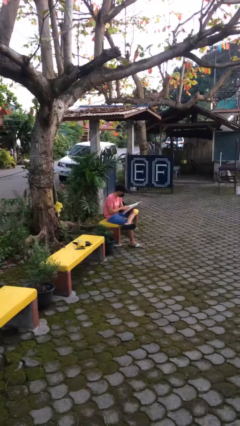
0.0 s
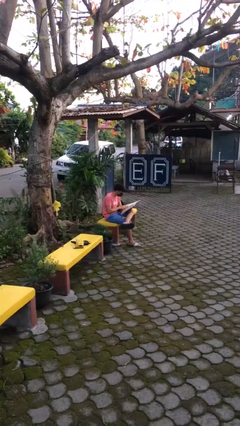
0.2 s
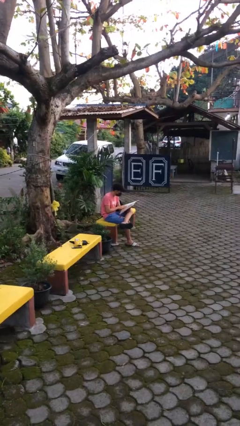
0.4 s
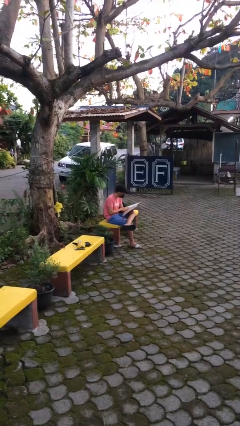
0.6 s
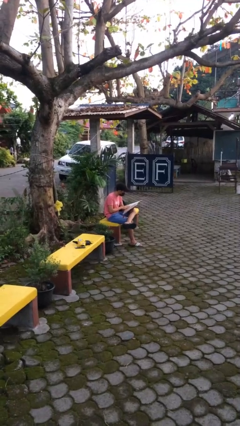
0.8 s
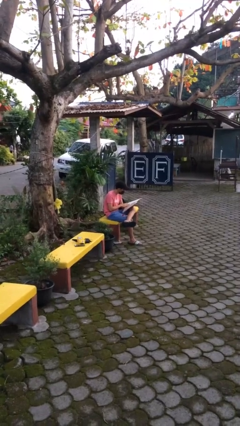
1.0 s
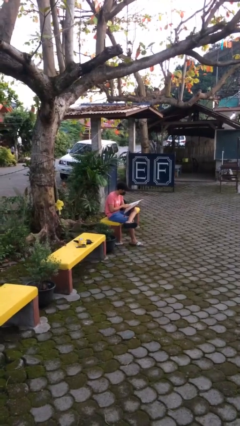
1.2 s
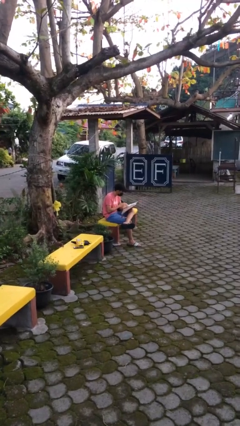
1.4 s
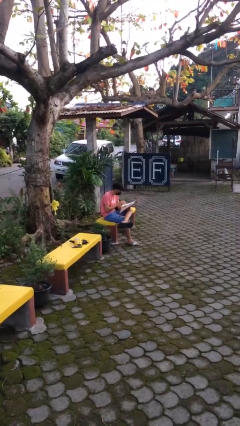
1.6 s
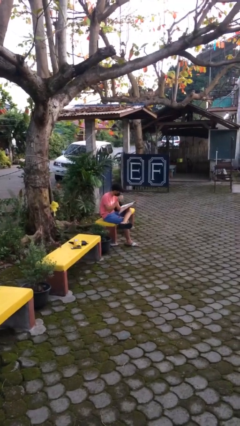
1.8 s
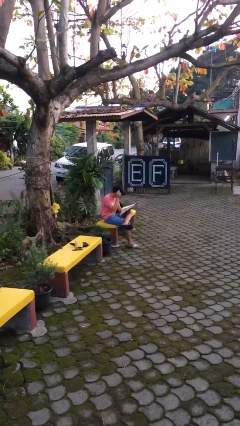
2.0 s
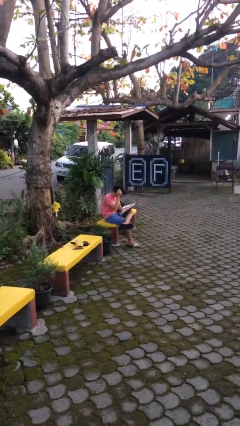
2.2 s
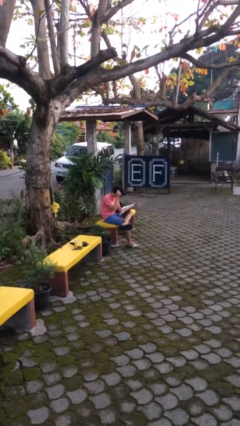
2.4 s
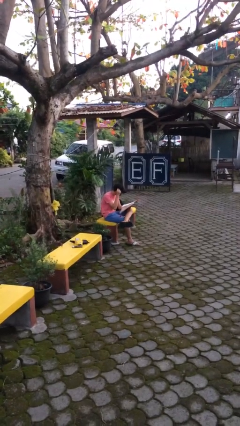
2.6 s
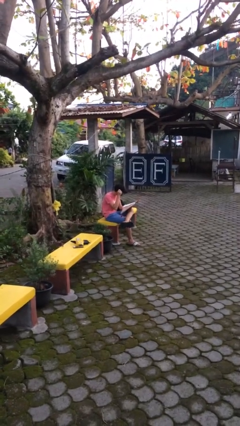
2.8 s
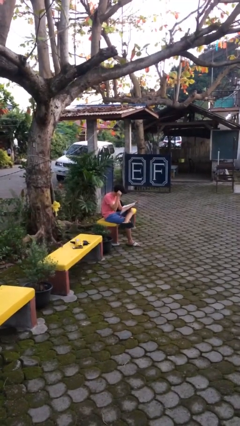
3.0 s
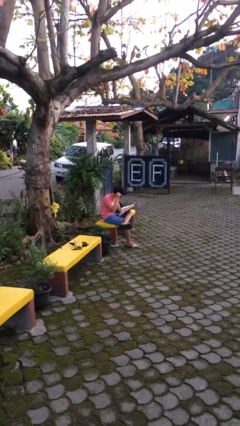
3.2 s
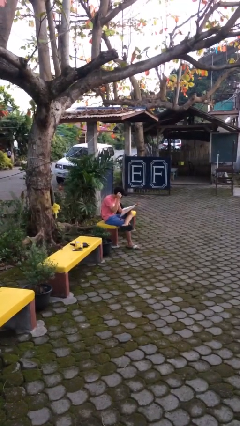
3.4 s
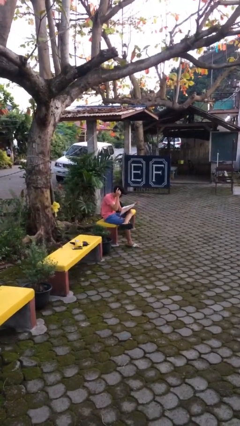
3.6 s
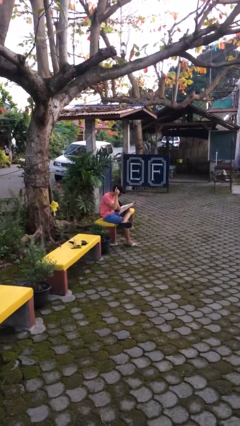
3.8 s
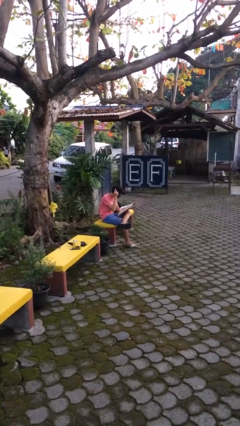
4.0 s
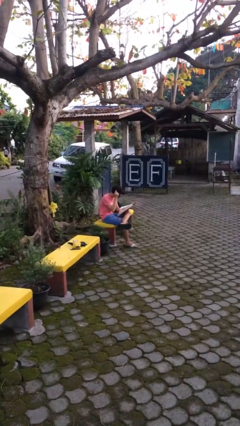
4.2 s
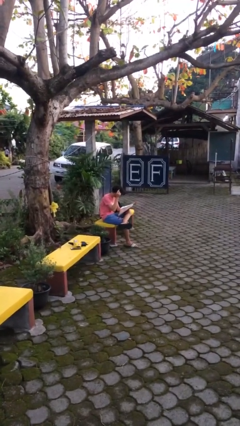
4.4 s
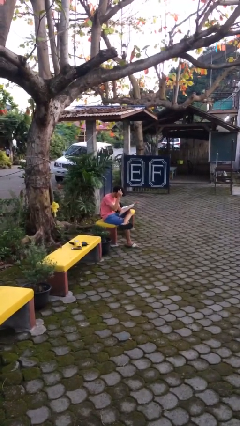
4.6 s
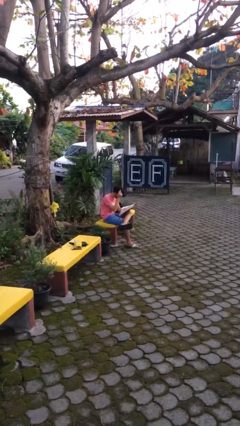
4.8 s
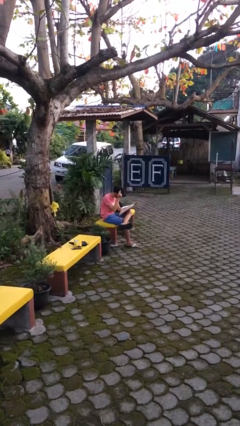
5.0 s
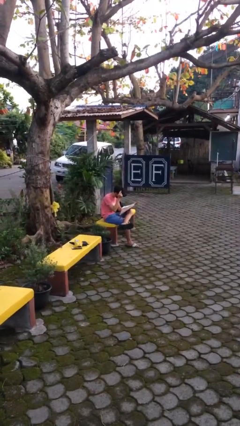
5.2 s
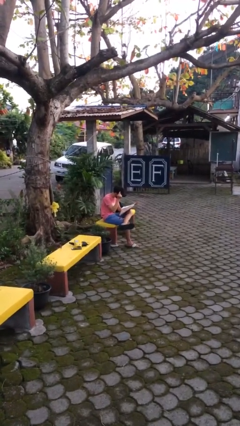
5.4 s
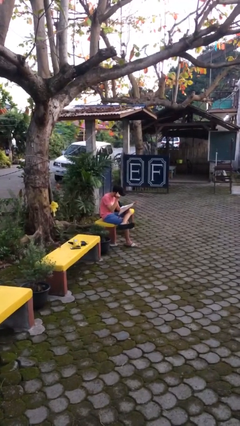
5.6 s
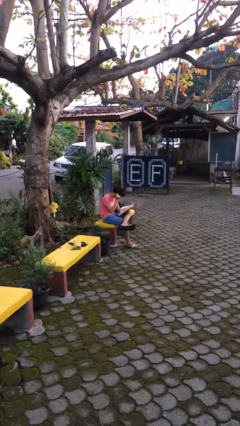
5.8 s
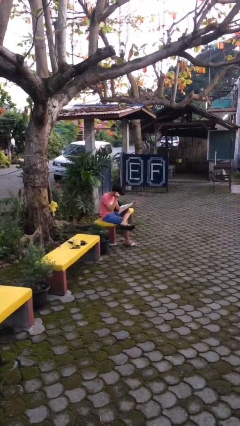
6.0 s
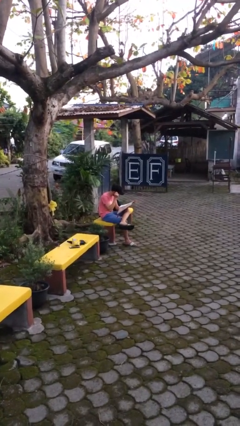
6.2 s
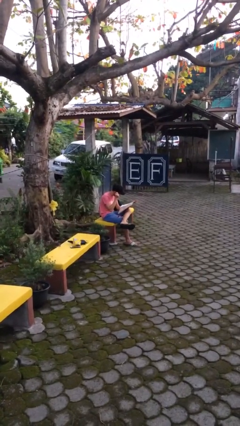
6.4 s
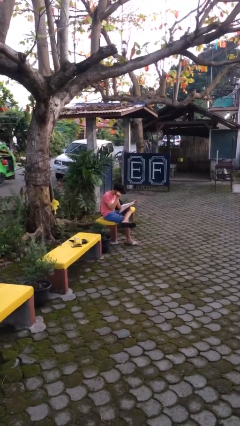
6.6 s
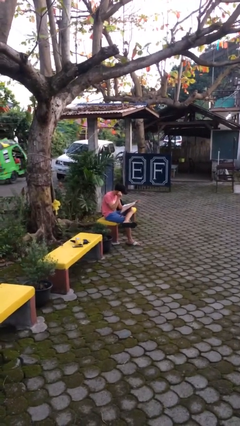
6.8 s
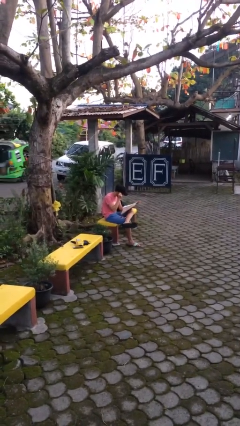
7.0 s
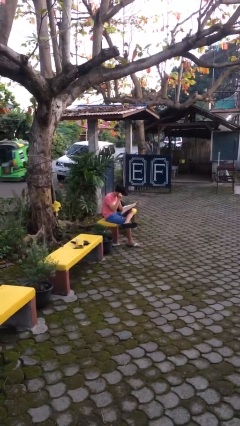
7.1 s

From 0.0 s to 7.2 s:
person reads document

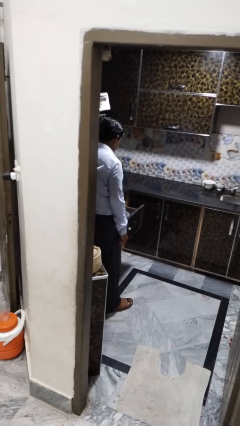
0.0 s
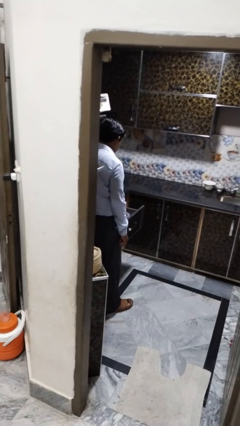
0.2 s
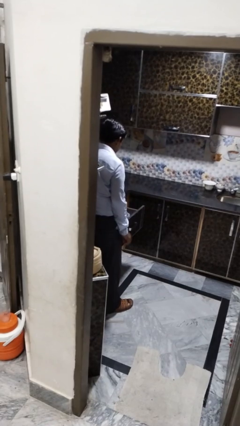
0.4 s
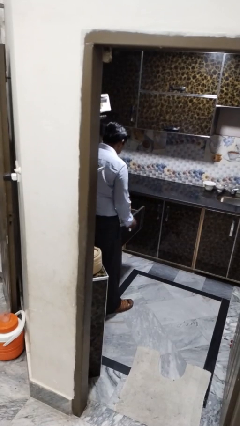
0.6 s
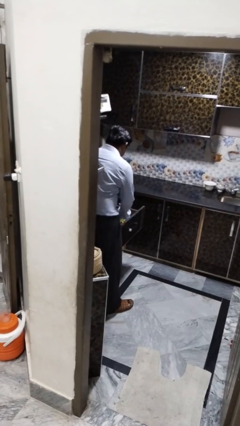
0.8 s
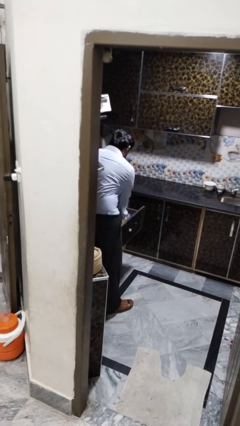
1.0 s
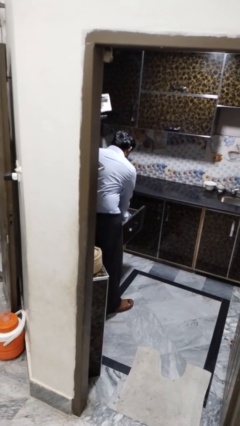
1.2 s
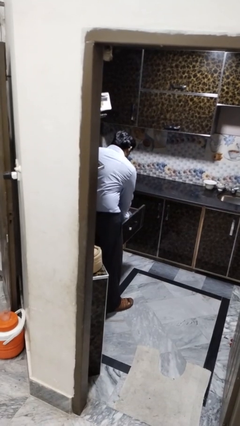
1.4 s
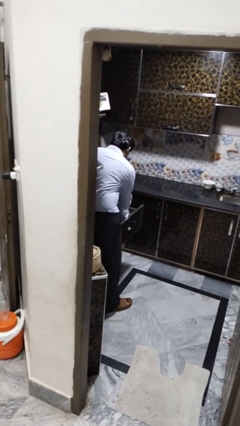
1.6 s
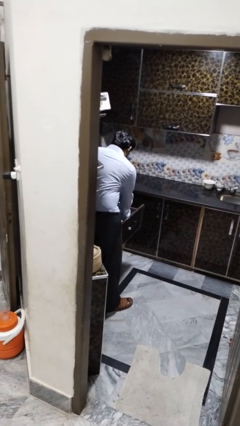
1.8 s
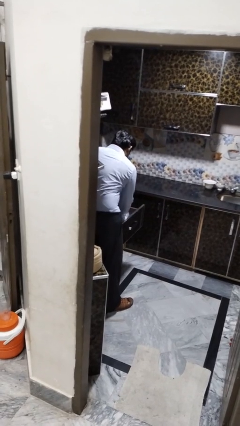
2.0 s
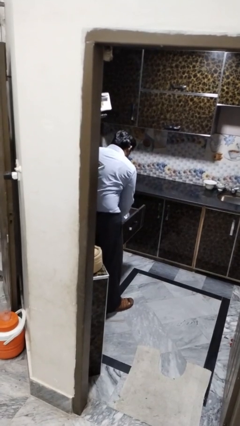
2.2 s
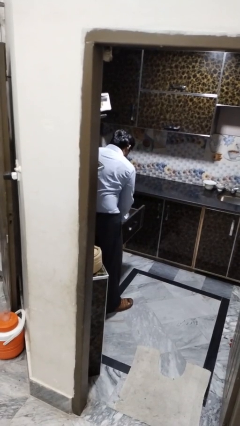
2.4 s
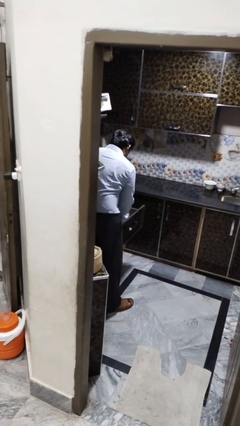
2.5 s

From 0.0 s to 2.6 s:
person searches in kitchen drawer

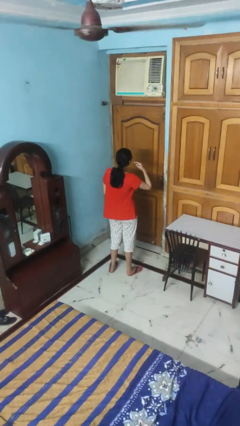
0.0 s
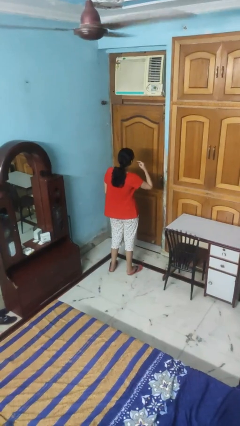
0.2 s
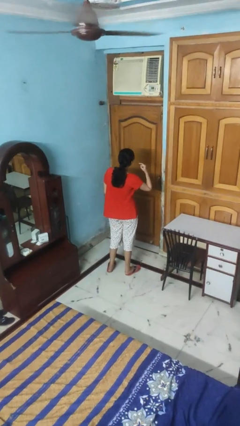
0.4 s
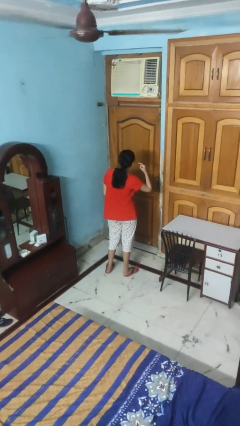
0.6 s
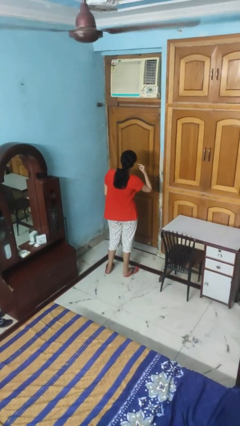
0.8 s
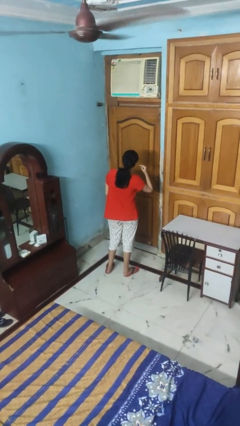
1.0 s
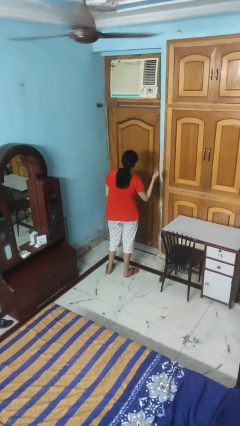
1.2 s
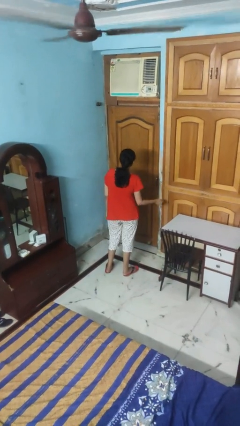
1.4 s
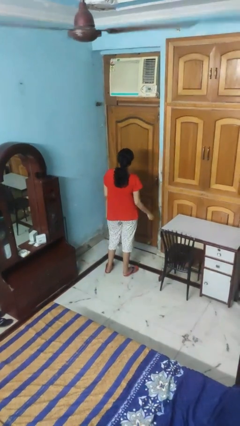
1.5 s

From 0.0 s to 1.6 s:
person gestures listen closely

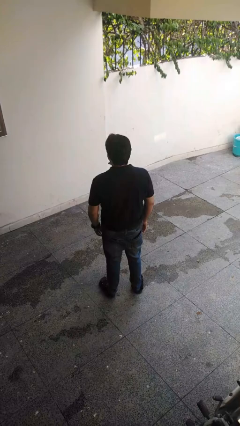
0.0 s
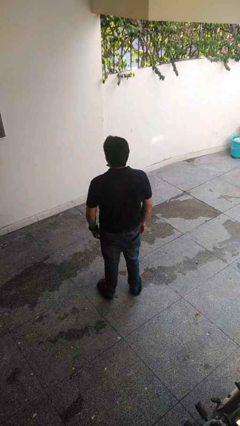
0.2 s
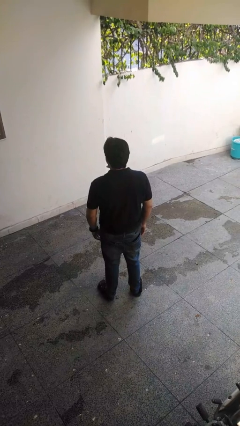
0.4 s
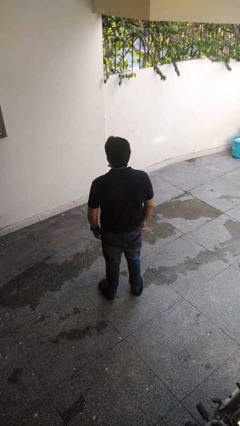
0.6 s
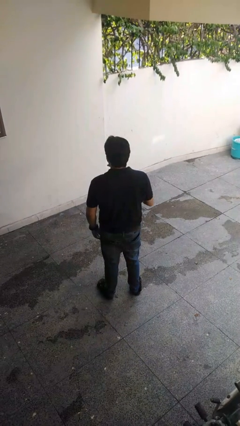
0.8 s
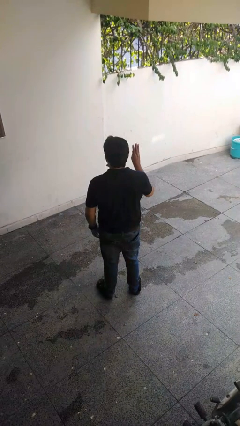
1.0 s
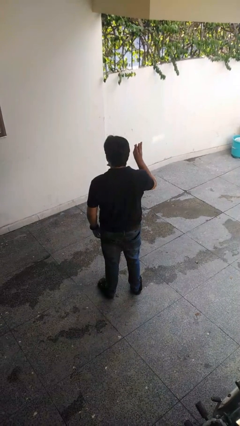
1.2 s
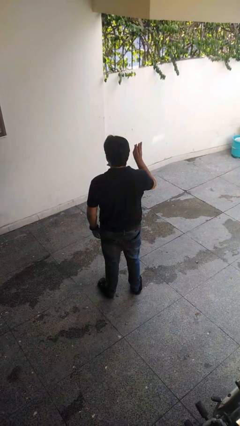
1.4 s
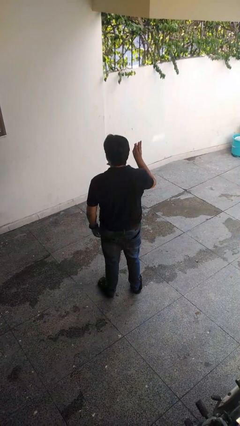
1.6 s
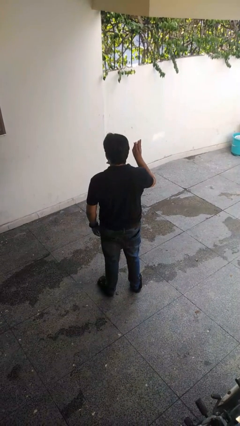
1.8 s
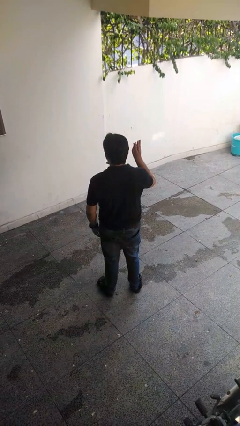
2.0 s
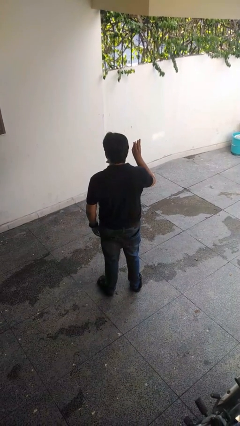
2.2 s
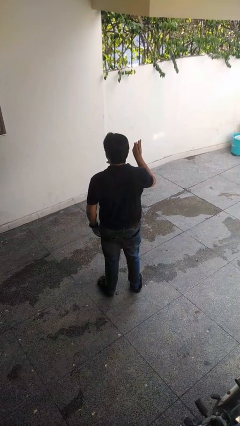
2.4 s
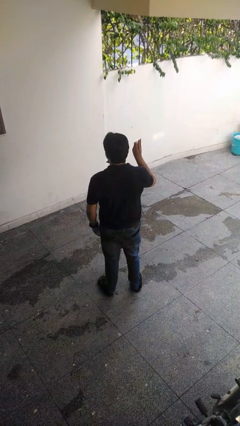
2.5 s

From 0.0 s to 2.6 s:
person gestures number three

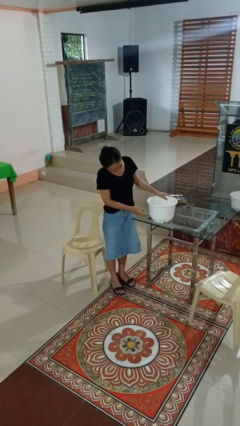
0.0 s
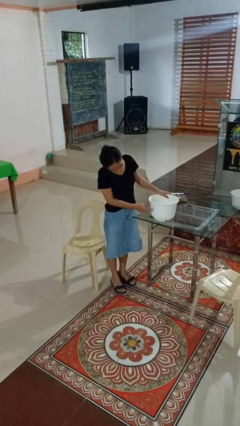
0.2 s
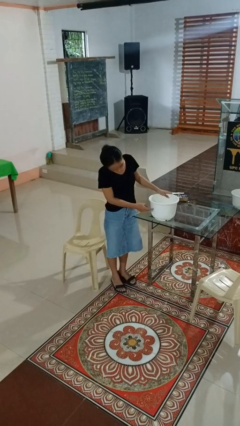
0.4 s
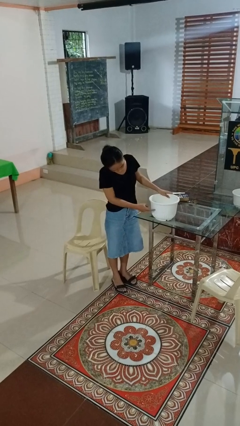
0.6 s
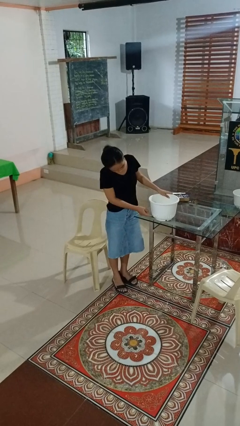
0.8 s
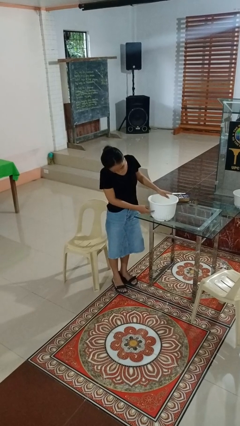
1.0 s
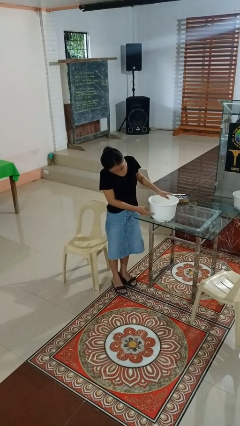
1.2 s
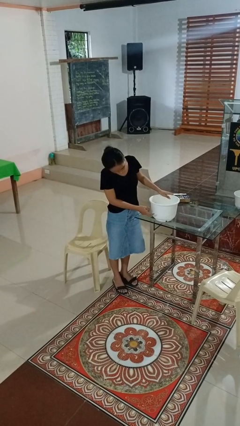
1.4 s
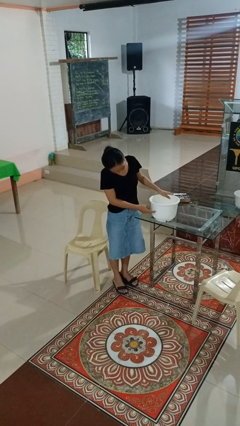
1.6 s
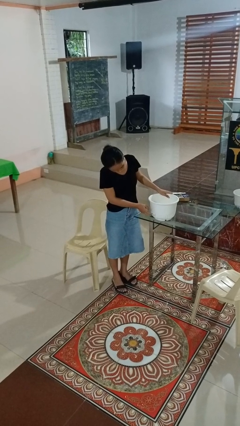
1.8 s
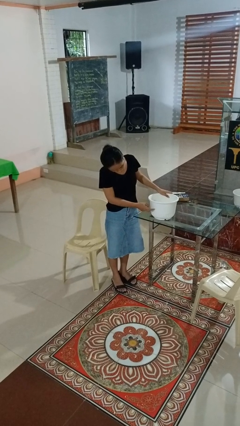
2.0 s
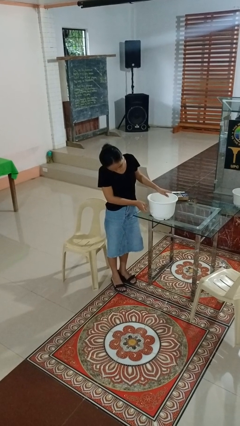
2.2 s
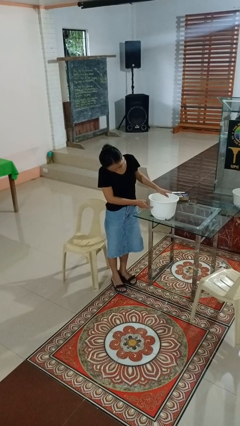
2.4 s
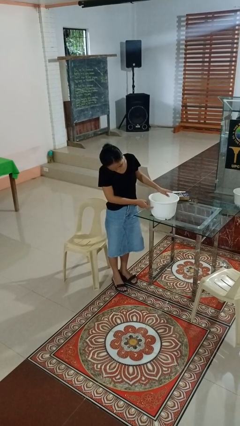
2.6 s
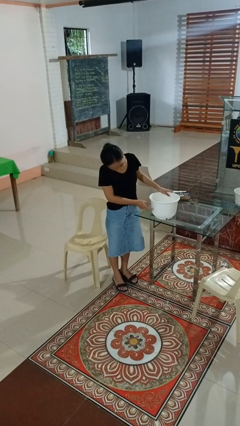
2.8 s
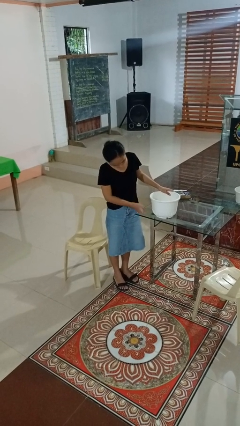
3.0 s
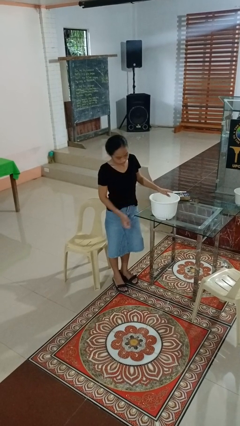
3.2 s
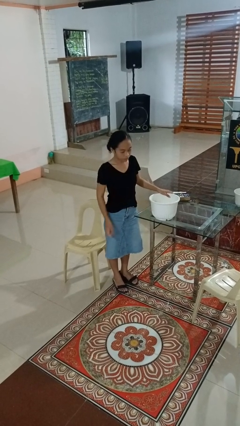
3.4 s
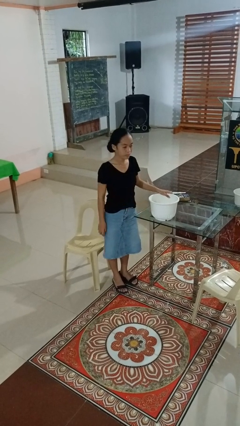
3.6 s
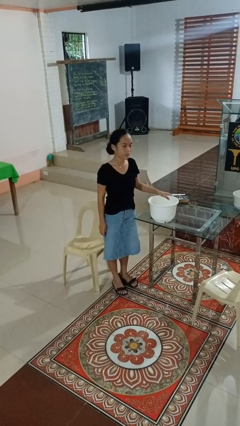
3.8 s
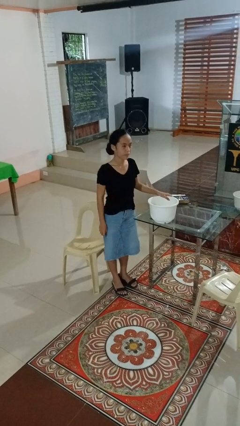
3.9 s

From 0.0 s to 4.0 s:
person taps object with finger
